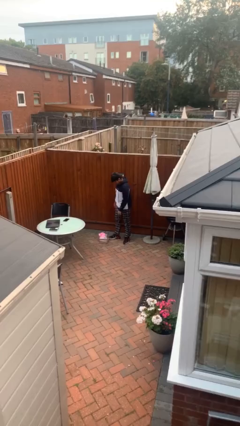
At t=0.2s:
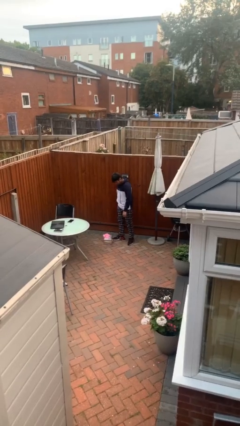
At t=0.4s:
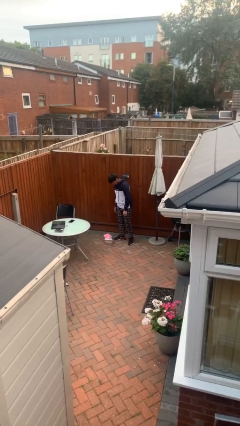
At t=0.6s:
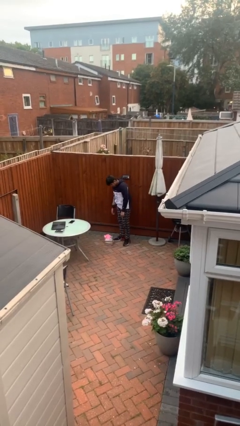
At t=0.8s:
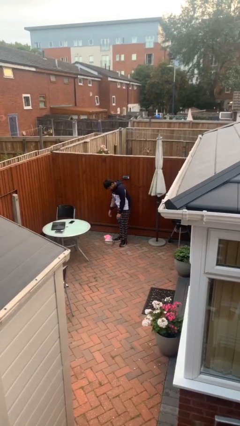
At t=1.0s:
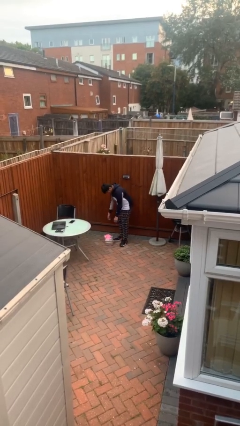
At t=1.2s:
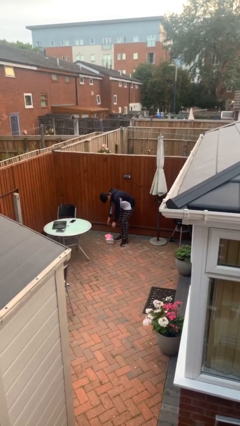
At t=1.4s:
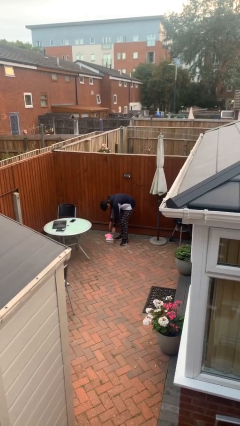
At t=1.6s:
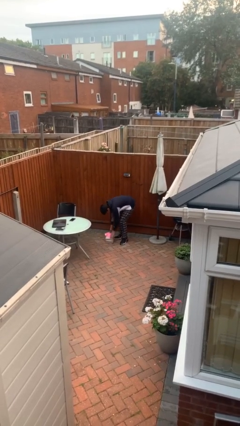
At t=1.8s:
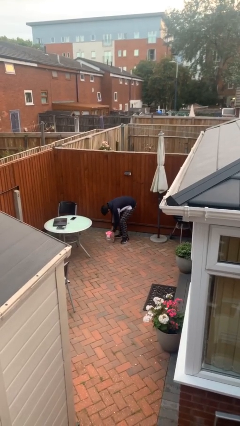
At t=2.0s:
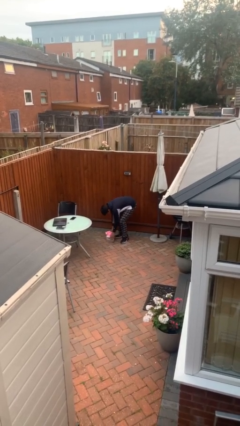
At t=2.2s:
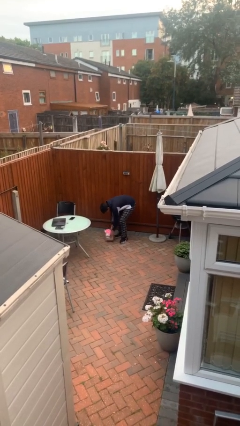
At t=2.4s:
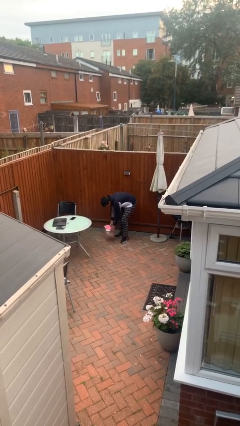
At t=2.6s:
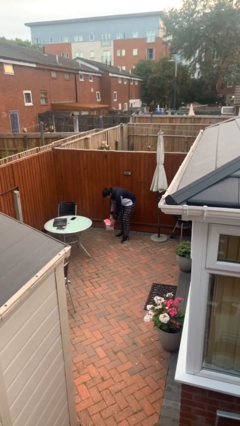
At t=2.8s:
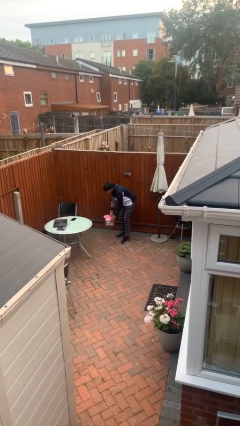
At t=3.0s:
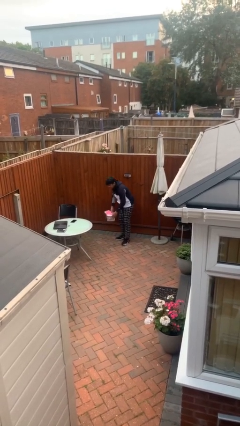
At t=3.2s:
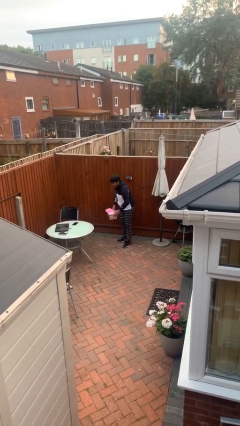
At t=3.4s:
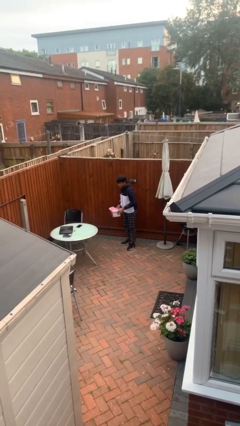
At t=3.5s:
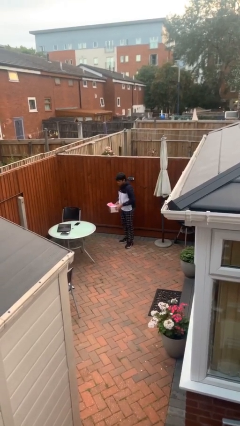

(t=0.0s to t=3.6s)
person picks up object from floor

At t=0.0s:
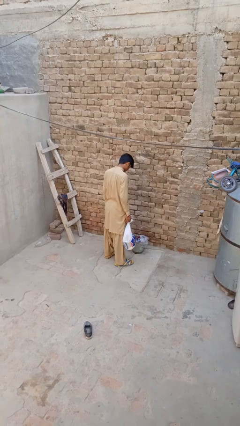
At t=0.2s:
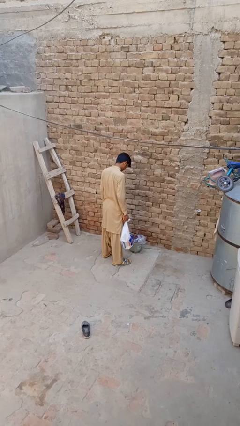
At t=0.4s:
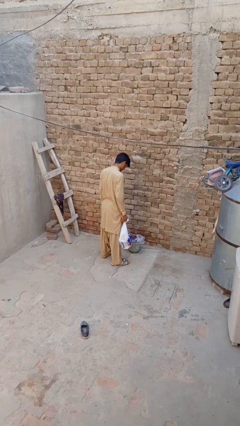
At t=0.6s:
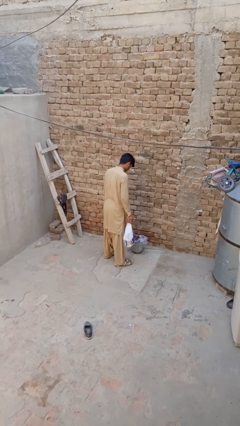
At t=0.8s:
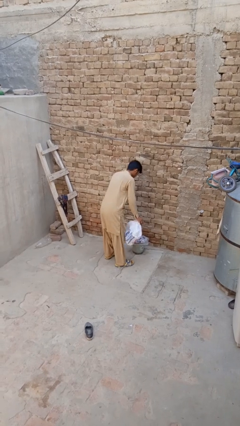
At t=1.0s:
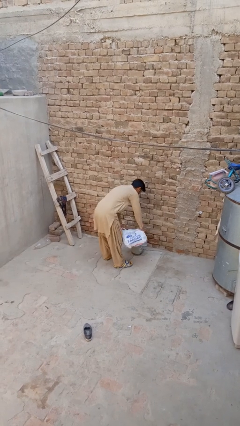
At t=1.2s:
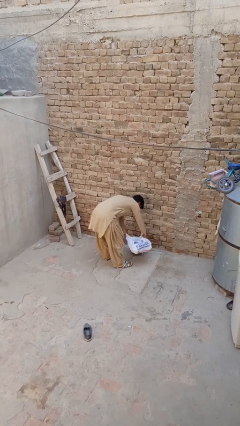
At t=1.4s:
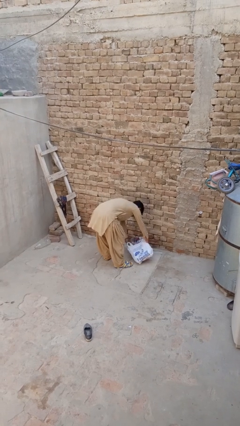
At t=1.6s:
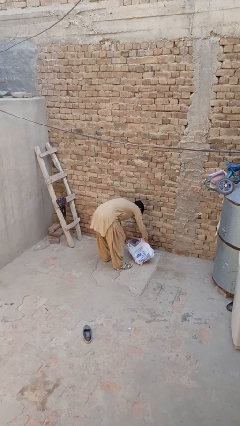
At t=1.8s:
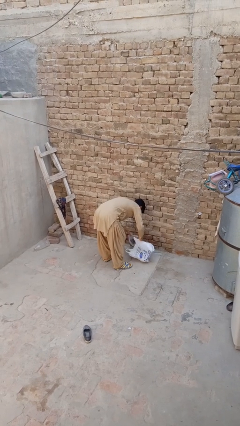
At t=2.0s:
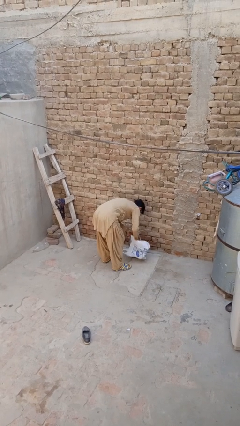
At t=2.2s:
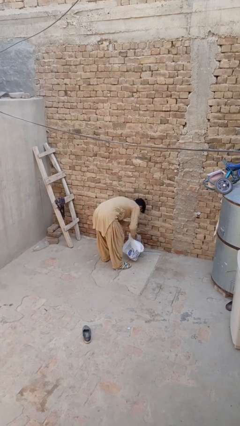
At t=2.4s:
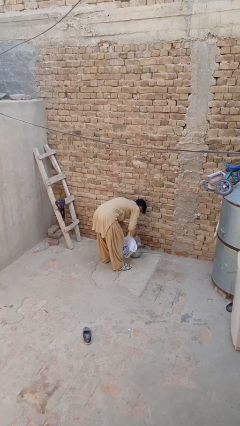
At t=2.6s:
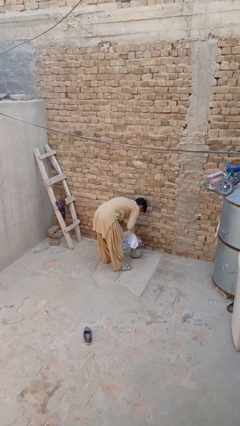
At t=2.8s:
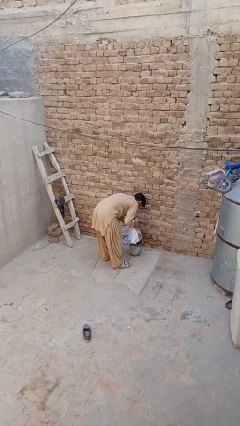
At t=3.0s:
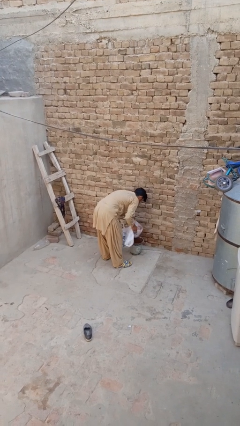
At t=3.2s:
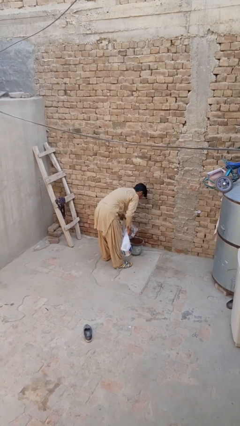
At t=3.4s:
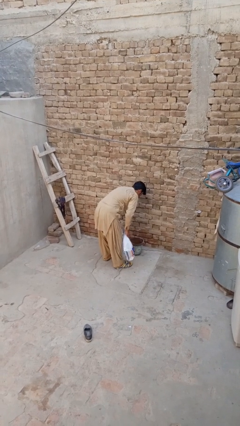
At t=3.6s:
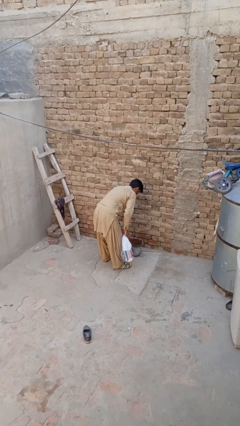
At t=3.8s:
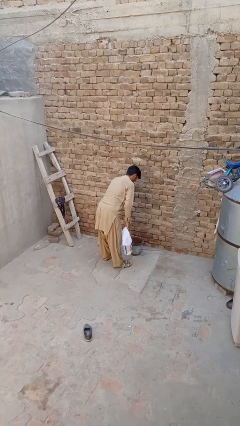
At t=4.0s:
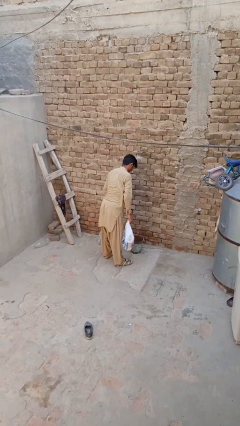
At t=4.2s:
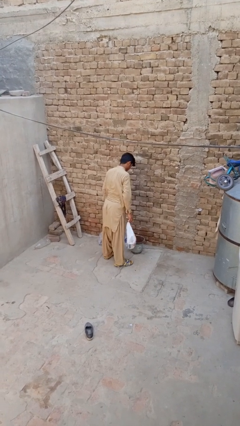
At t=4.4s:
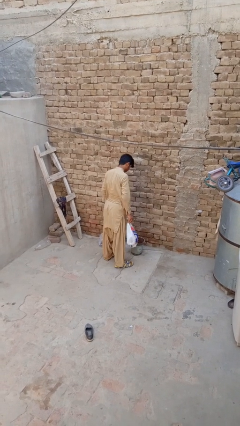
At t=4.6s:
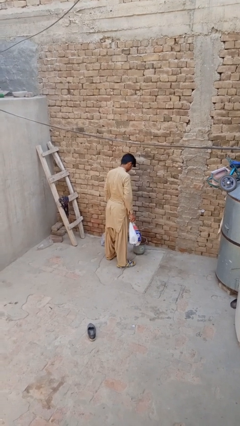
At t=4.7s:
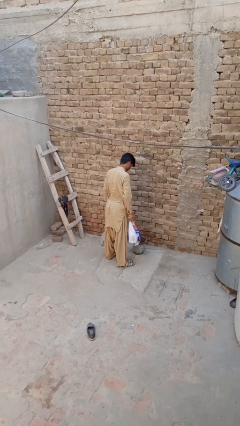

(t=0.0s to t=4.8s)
person removes trashbag from trashcan

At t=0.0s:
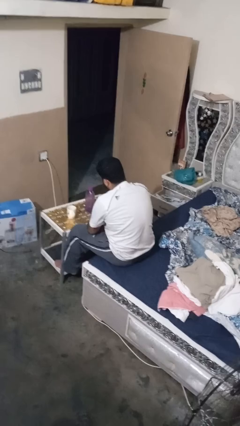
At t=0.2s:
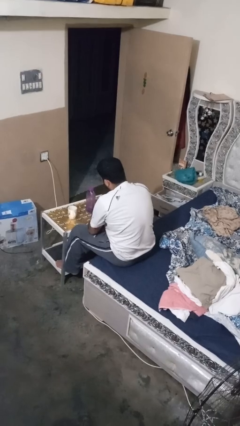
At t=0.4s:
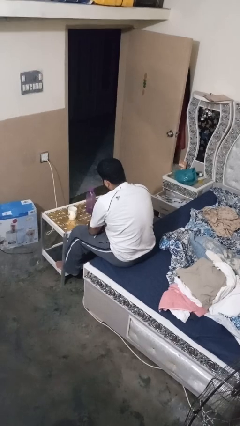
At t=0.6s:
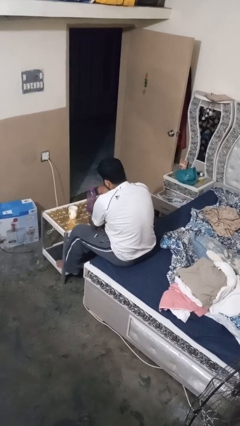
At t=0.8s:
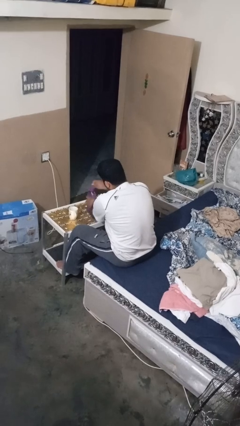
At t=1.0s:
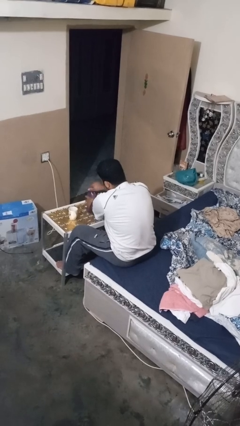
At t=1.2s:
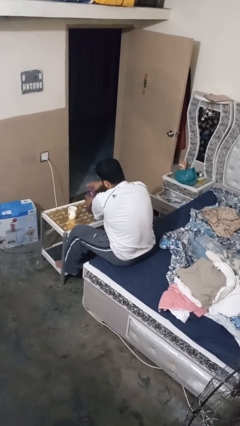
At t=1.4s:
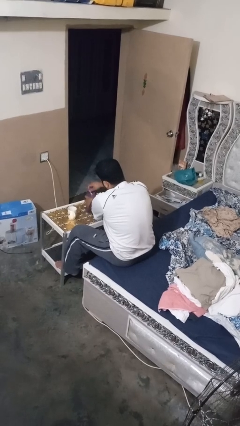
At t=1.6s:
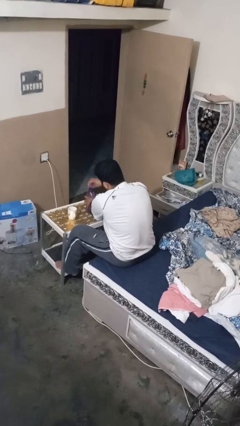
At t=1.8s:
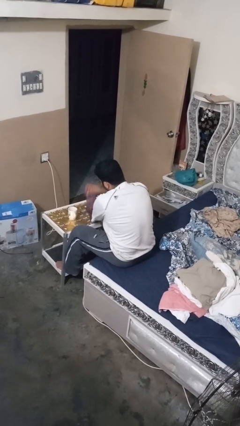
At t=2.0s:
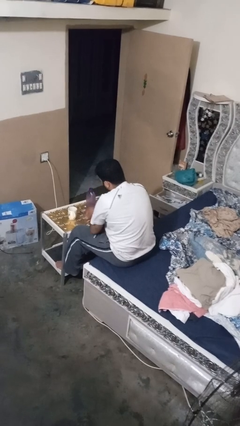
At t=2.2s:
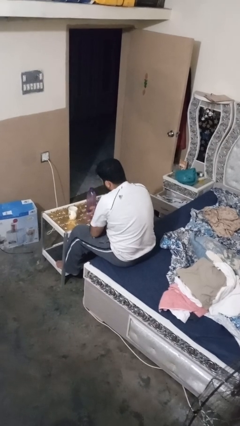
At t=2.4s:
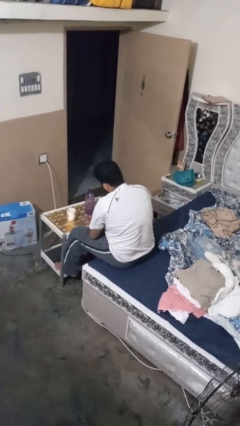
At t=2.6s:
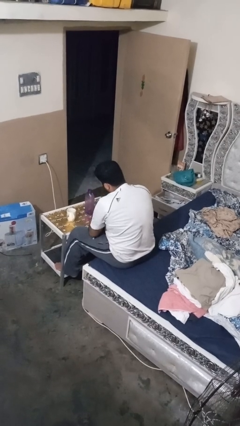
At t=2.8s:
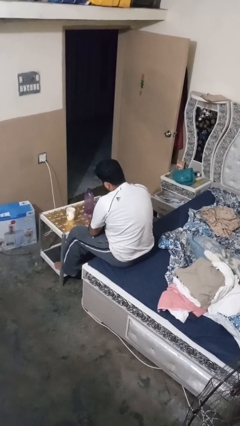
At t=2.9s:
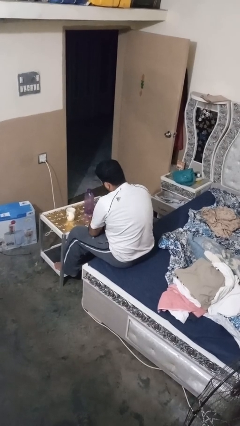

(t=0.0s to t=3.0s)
person unscrews lid from bottle

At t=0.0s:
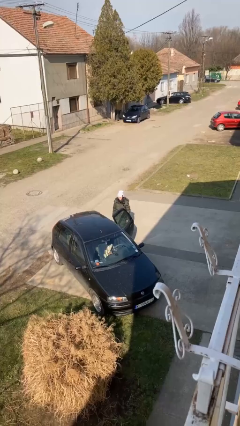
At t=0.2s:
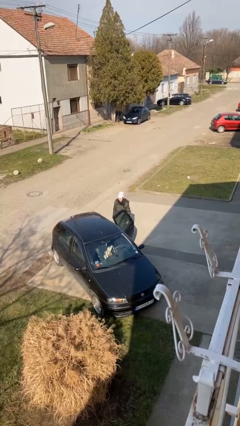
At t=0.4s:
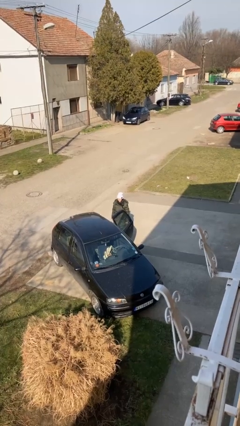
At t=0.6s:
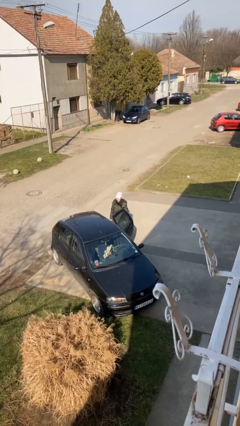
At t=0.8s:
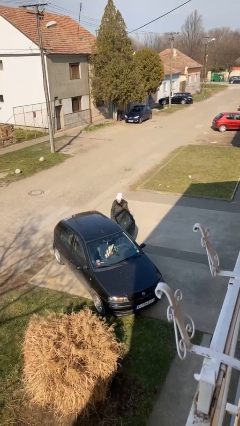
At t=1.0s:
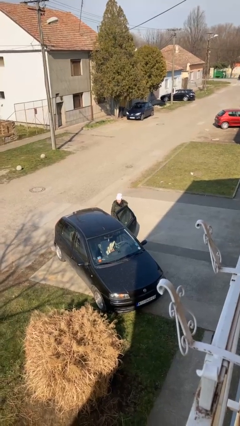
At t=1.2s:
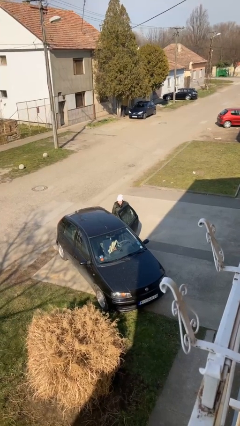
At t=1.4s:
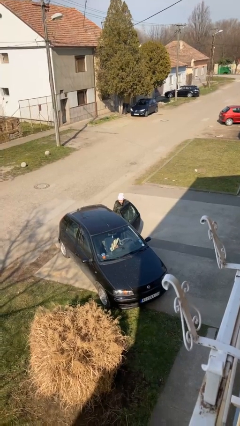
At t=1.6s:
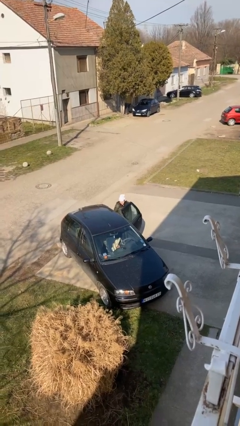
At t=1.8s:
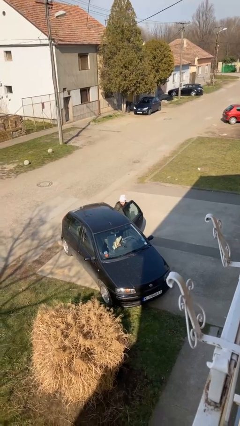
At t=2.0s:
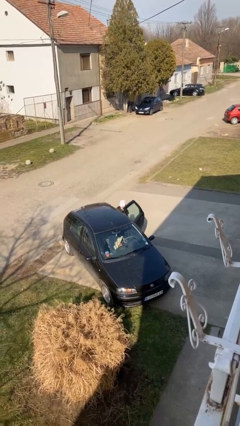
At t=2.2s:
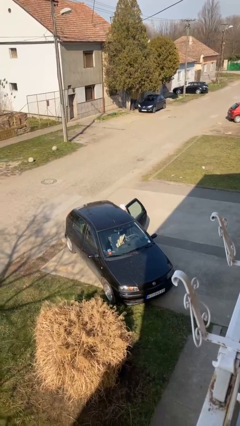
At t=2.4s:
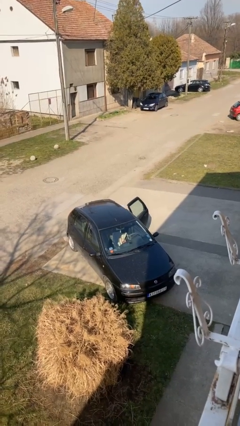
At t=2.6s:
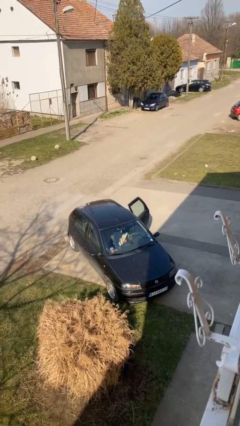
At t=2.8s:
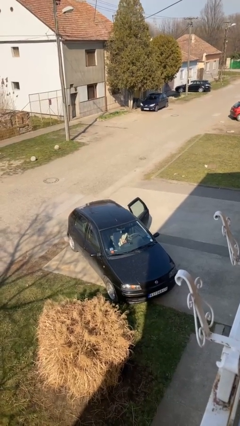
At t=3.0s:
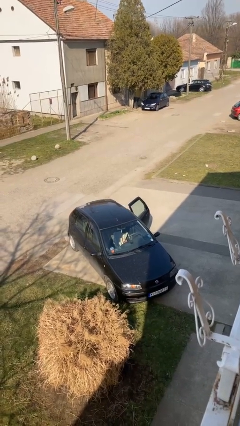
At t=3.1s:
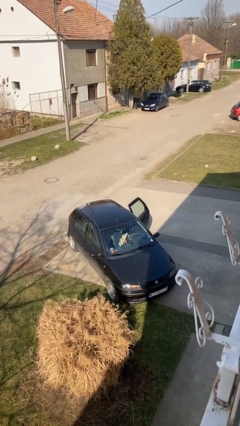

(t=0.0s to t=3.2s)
person enters car

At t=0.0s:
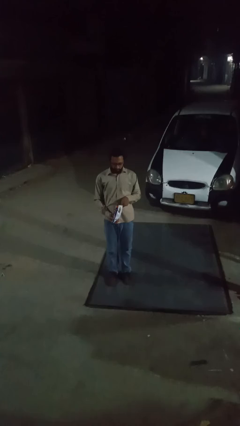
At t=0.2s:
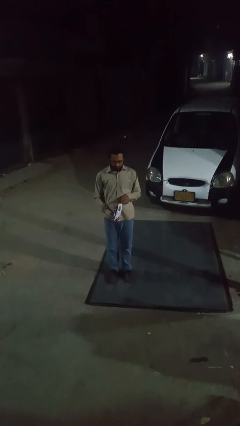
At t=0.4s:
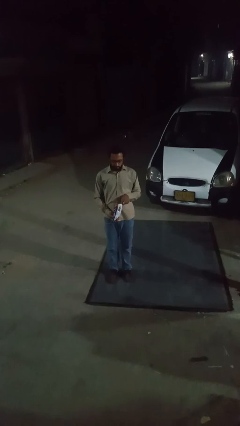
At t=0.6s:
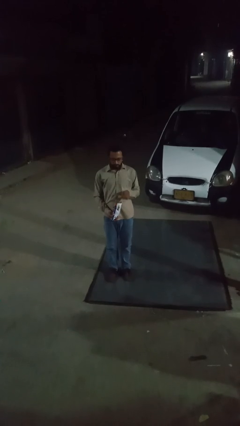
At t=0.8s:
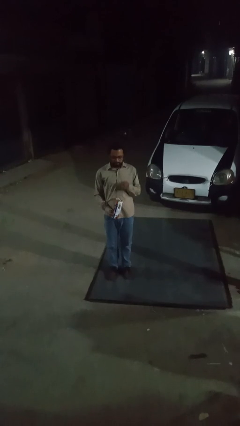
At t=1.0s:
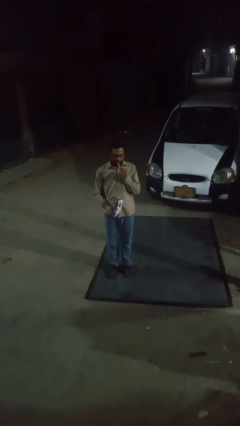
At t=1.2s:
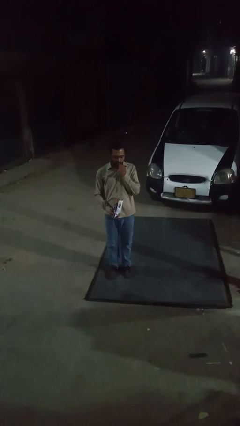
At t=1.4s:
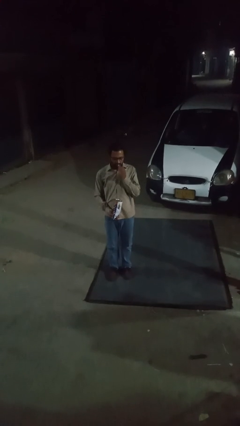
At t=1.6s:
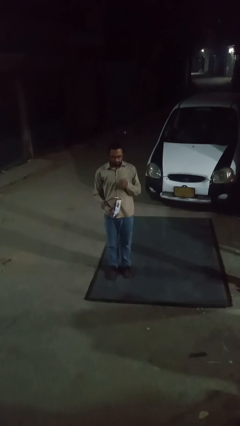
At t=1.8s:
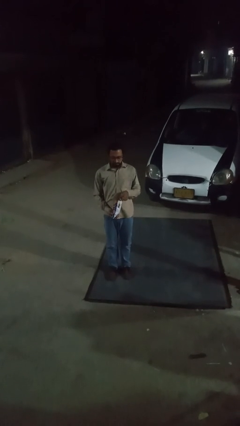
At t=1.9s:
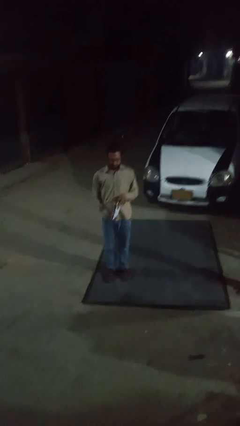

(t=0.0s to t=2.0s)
person eats snack from bag

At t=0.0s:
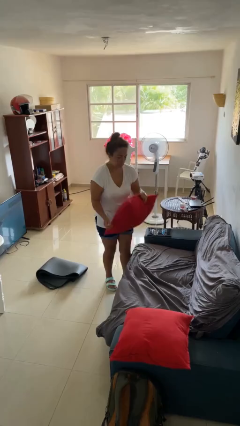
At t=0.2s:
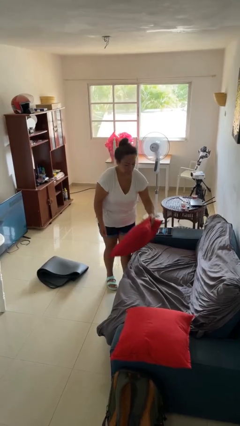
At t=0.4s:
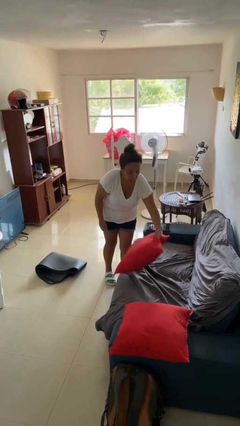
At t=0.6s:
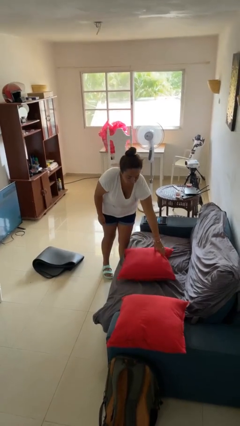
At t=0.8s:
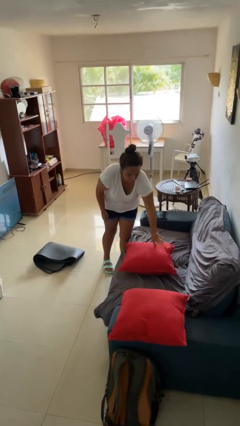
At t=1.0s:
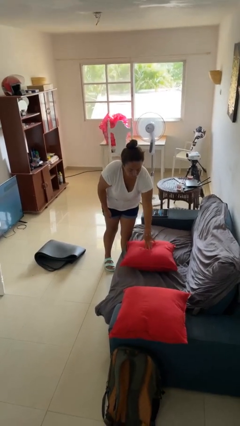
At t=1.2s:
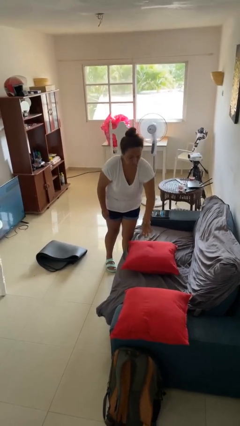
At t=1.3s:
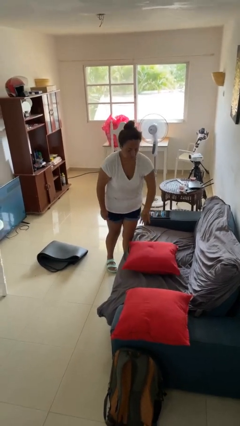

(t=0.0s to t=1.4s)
person puts down object on couch
